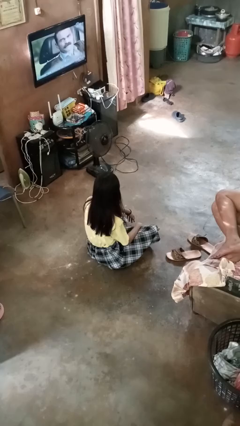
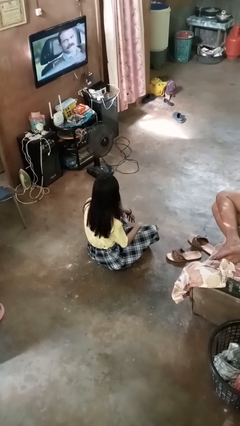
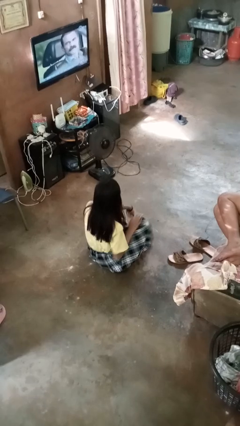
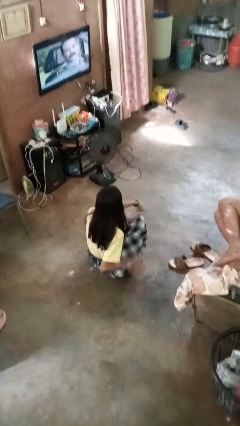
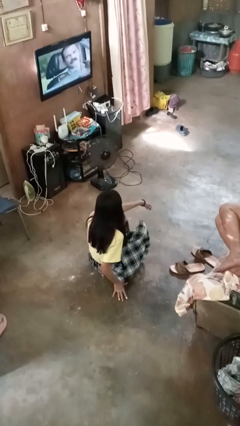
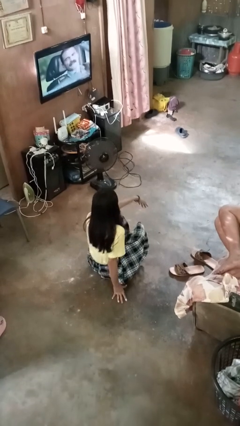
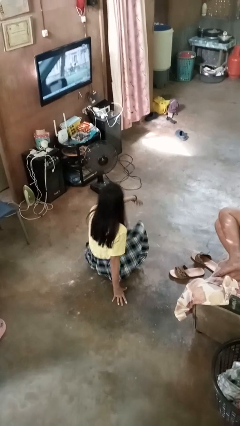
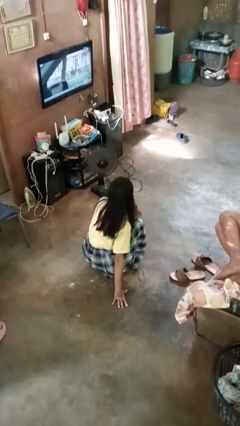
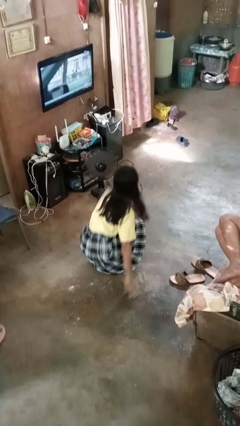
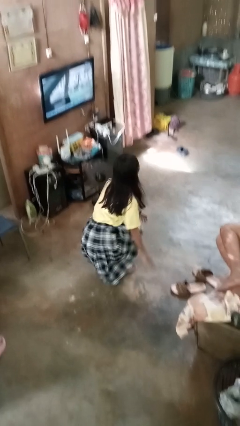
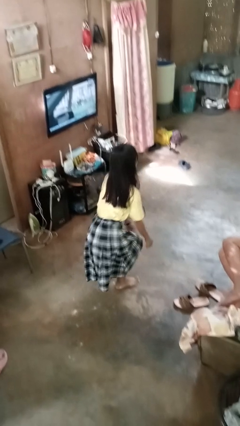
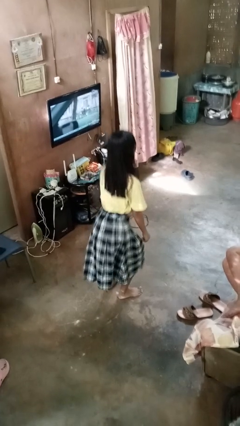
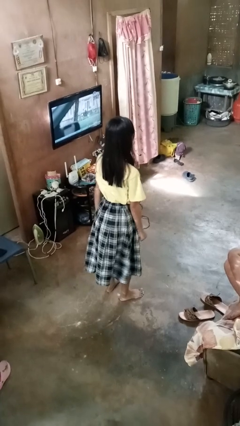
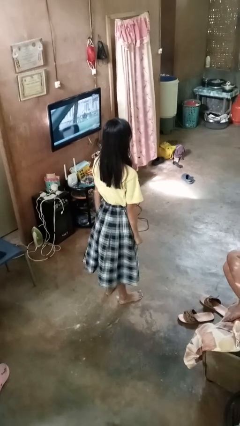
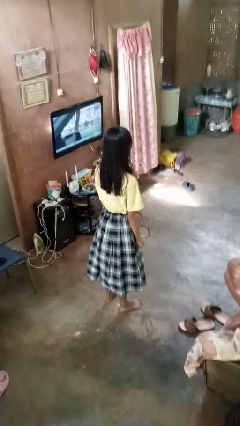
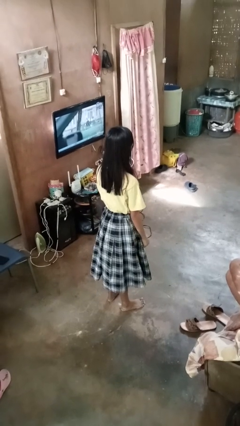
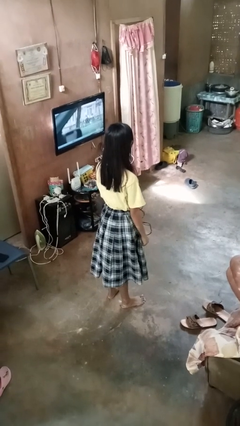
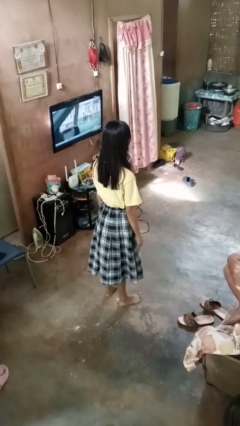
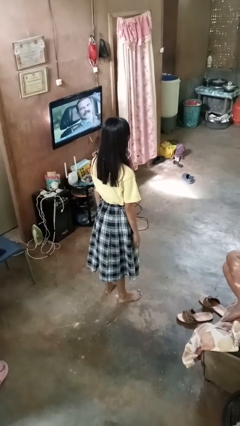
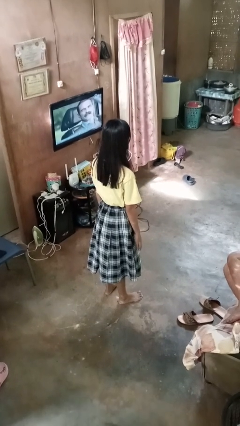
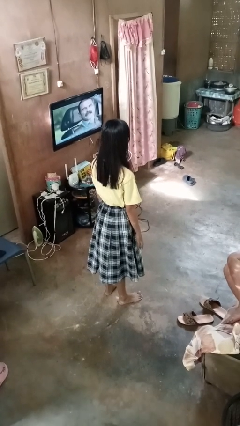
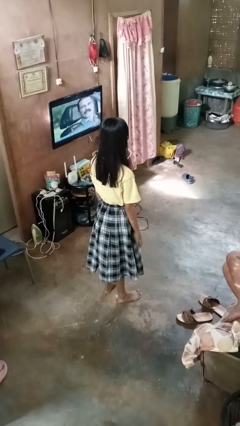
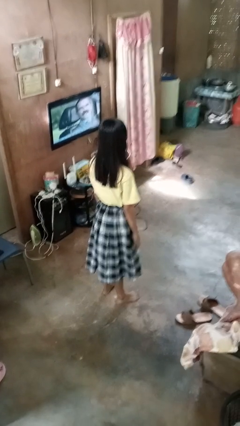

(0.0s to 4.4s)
person stands up from floor

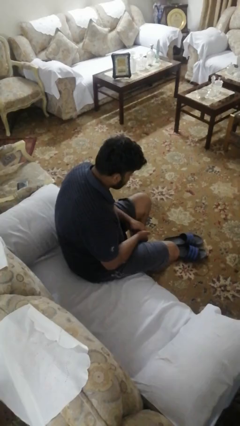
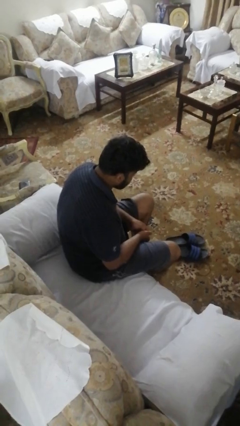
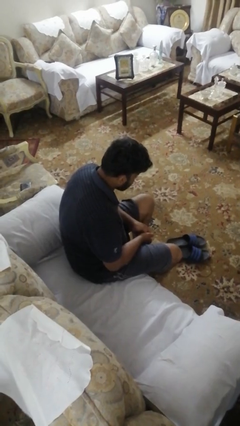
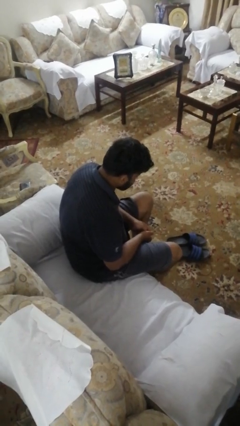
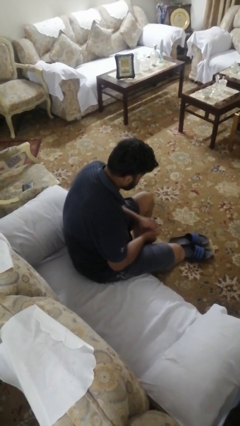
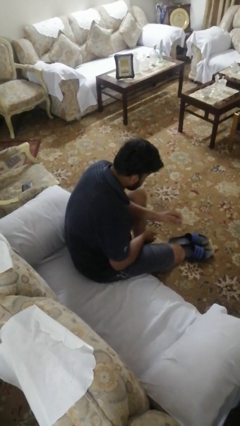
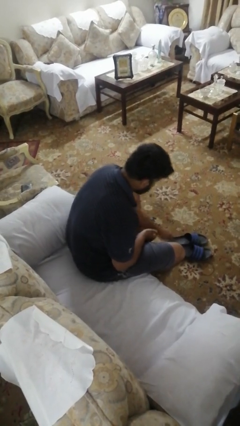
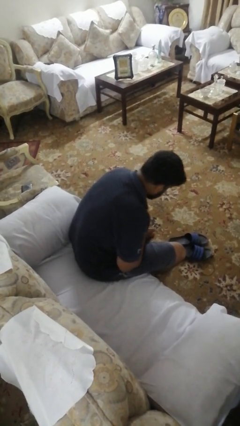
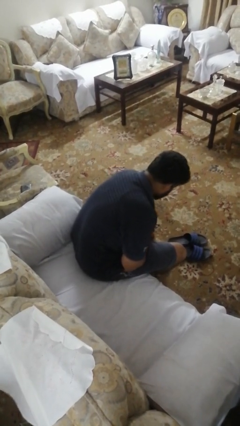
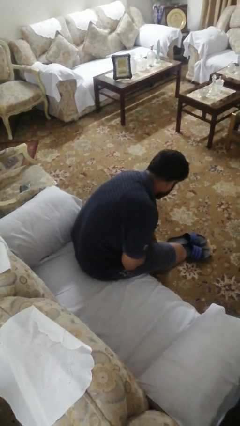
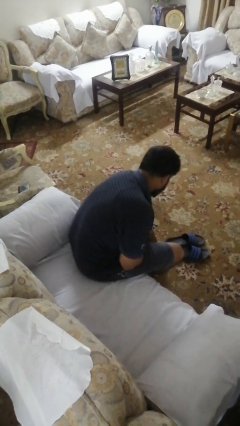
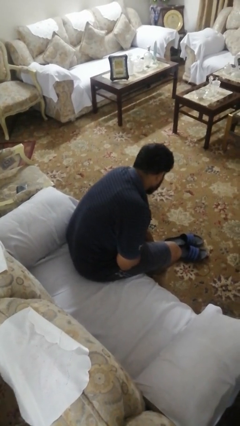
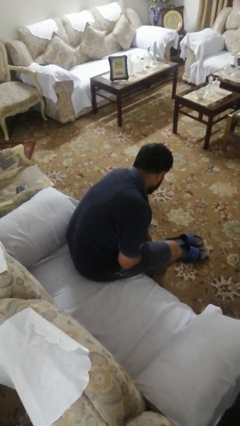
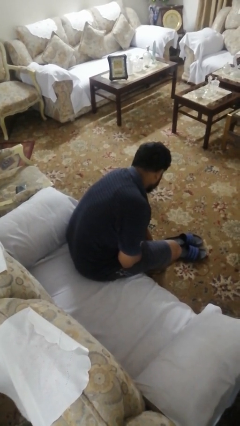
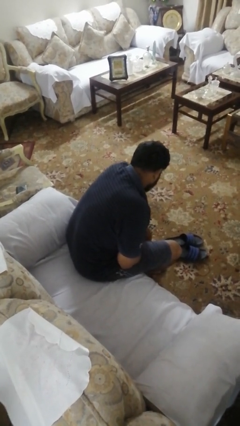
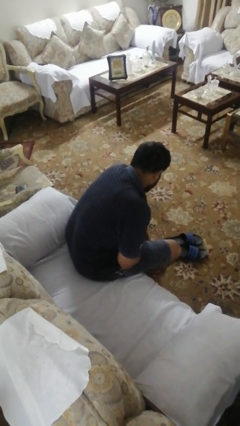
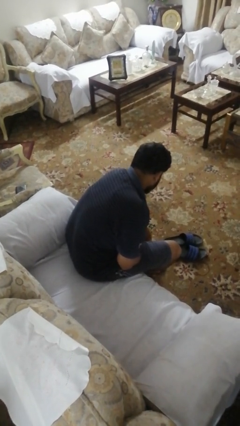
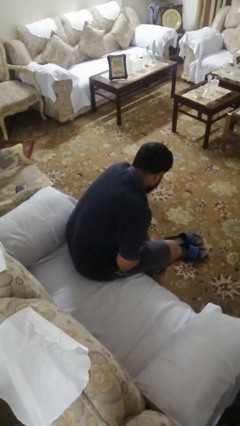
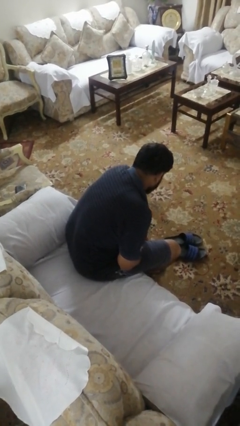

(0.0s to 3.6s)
person rubs foot

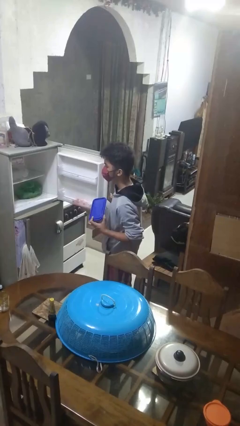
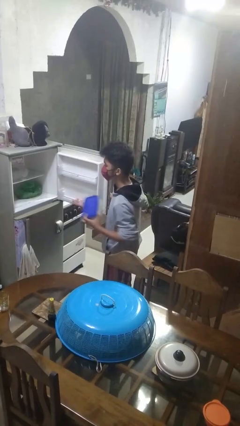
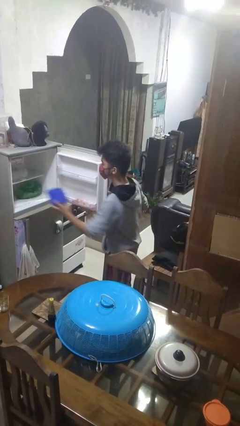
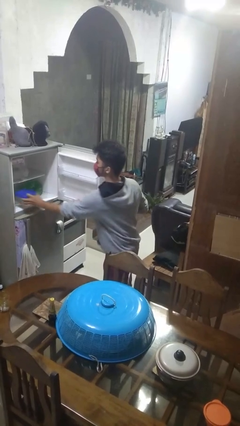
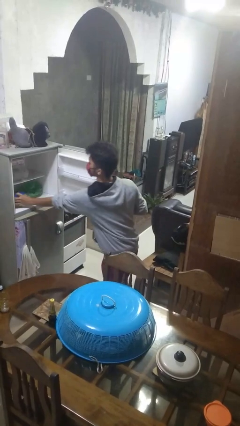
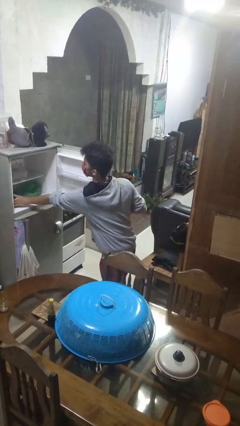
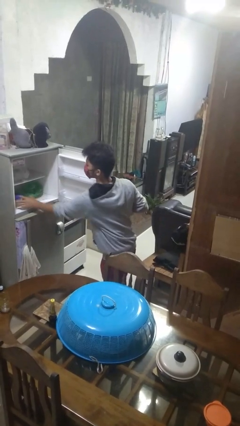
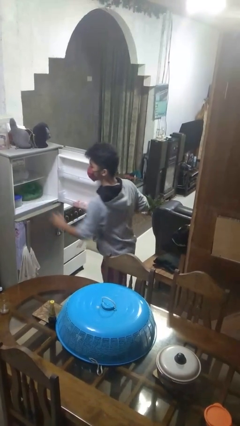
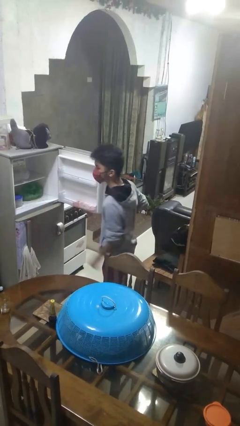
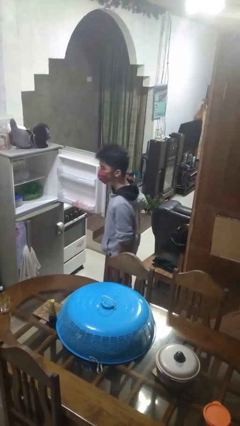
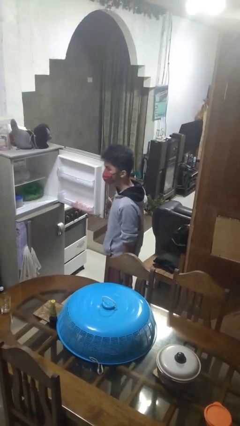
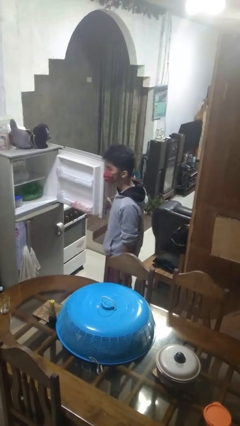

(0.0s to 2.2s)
person puts object into refrigerator

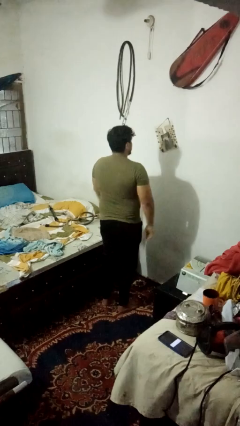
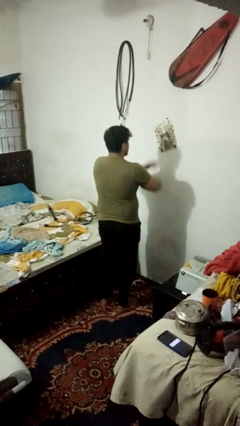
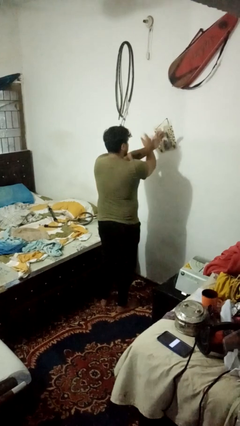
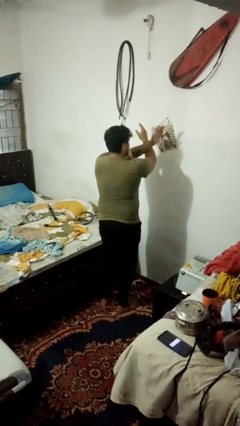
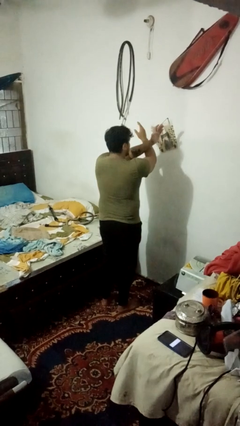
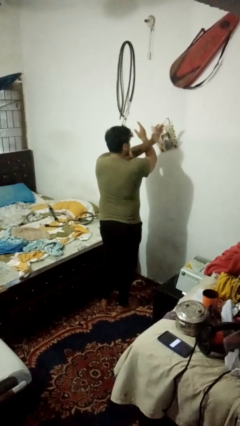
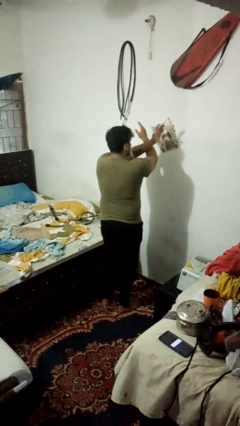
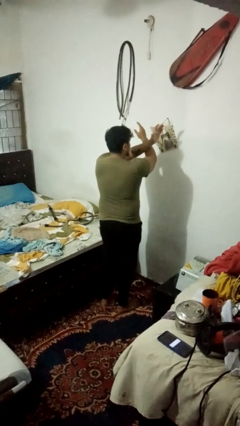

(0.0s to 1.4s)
person gestures arms x

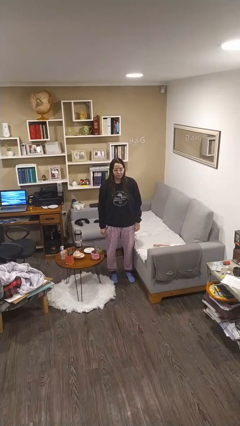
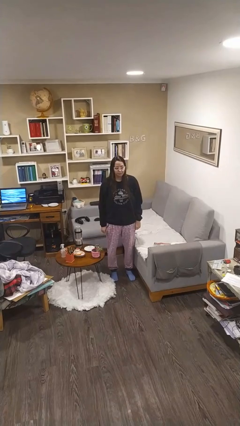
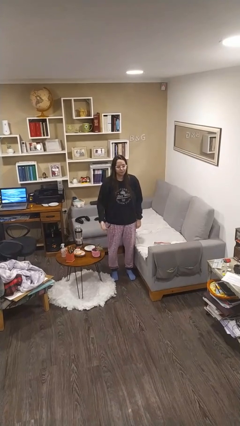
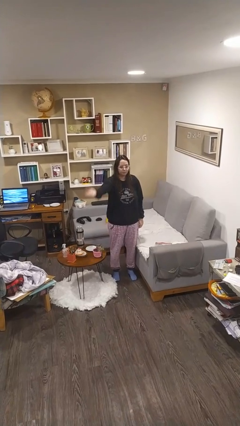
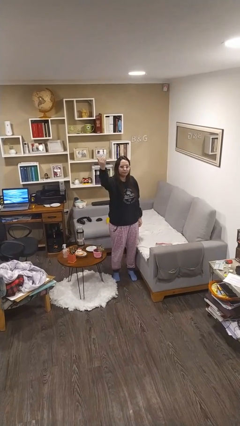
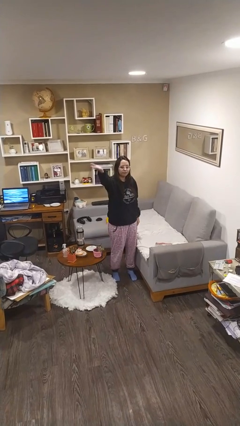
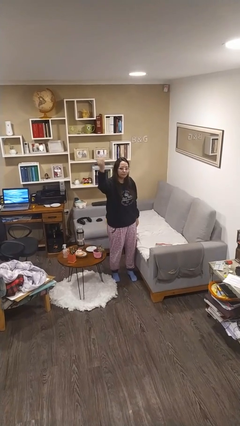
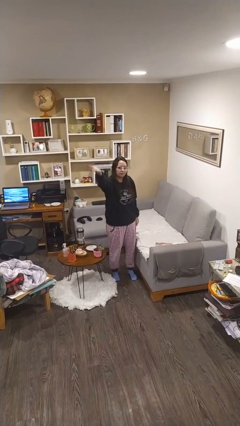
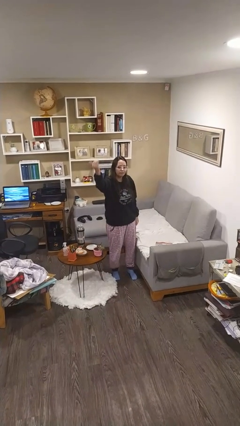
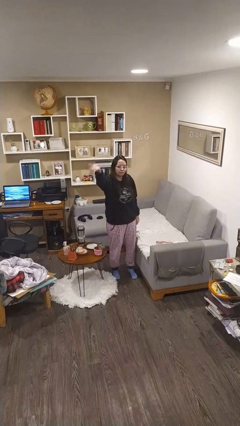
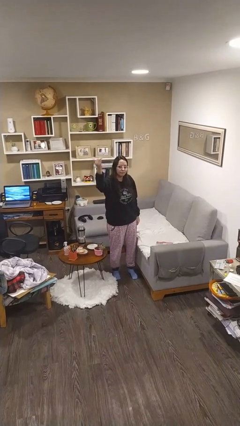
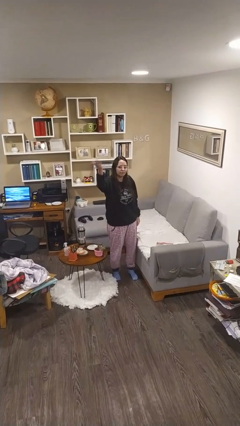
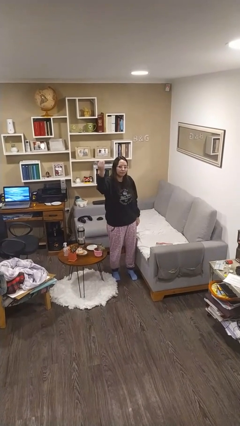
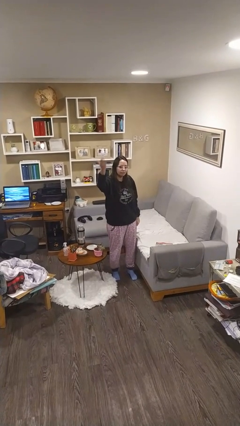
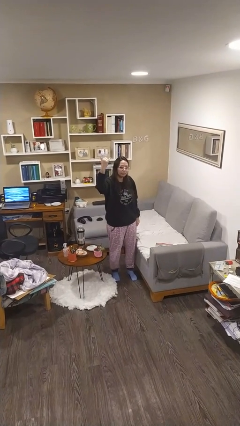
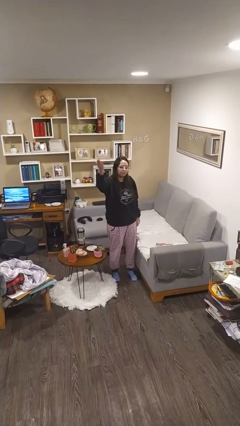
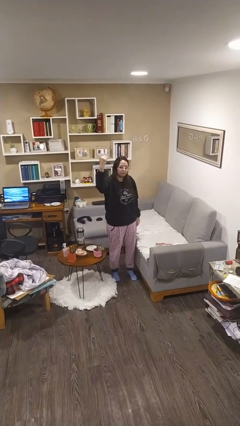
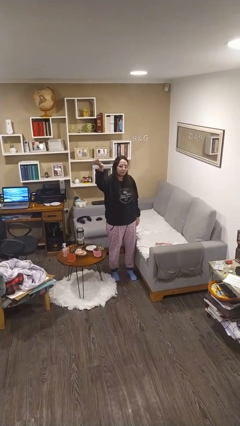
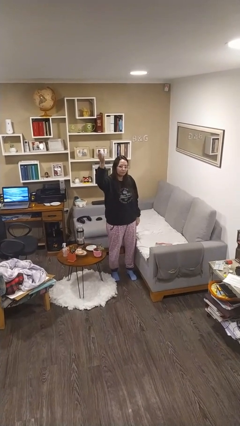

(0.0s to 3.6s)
person gestures come here

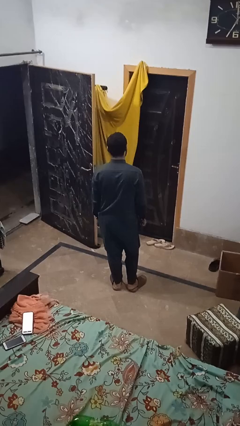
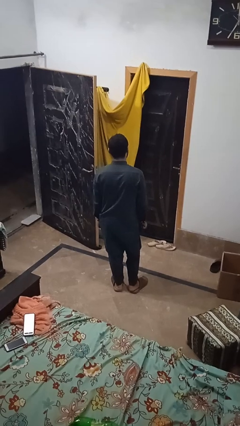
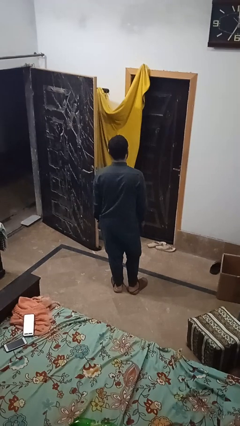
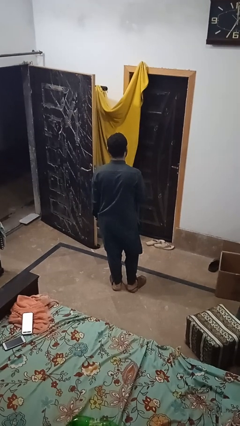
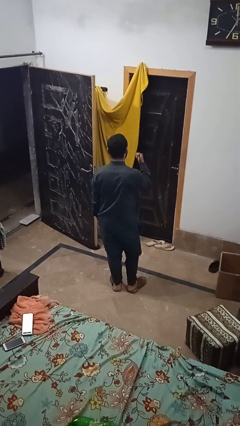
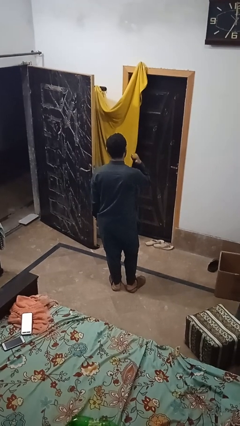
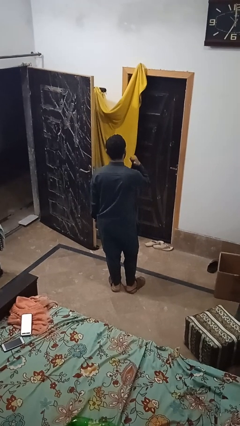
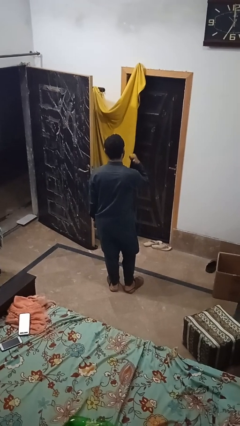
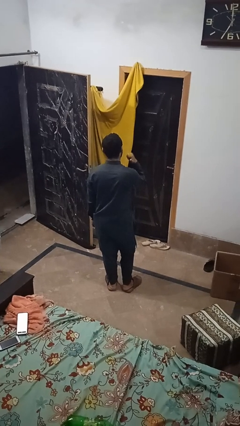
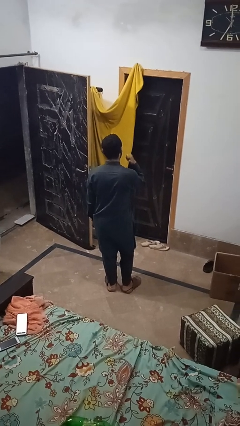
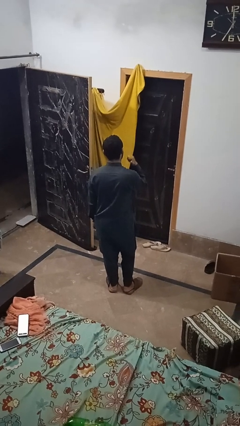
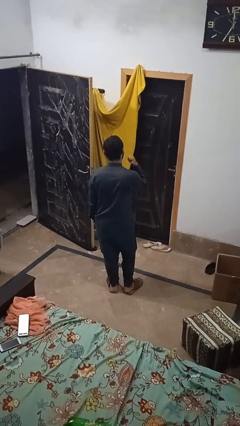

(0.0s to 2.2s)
person gestures behind me
